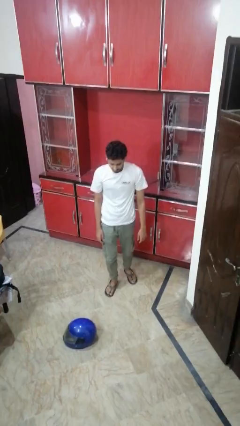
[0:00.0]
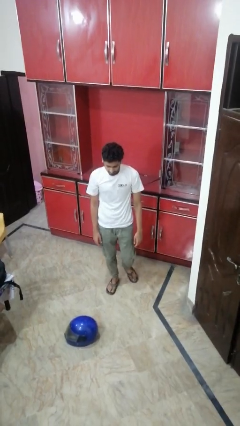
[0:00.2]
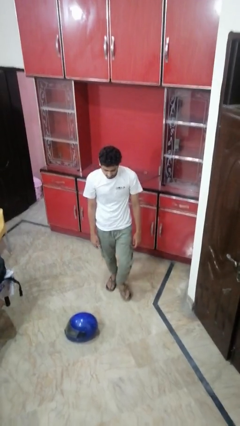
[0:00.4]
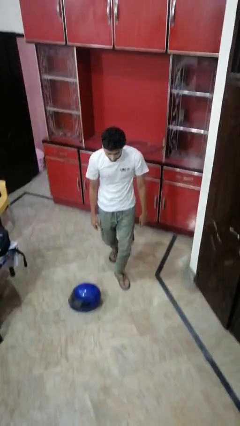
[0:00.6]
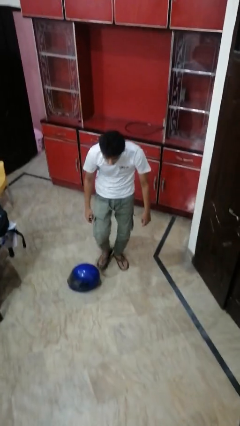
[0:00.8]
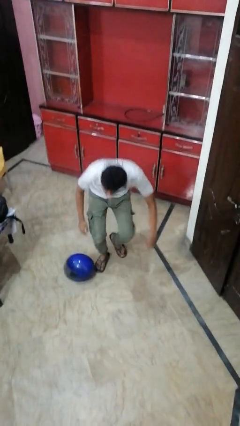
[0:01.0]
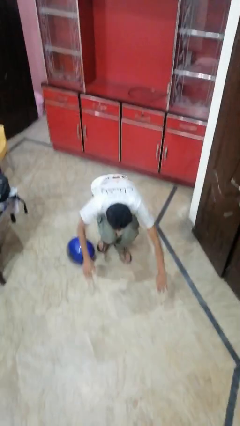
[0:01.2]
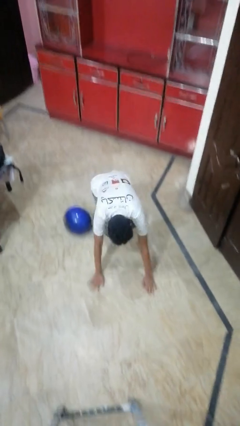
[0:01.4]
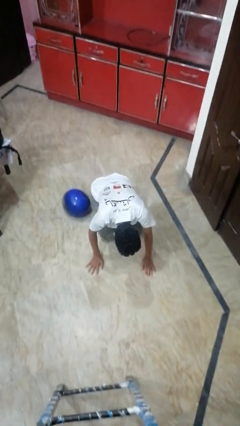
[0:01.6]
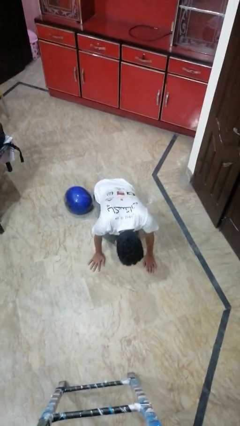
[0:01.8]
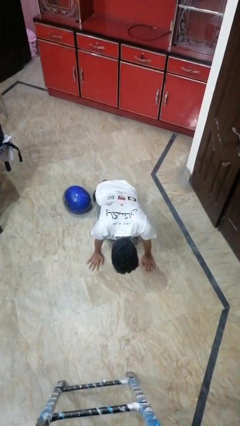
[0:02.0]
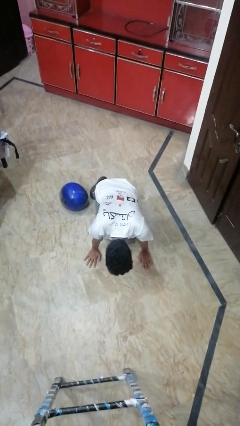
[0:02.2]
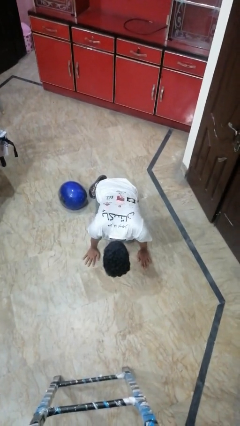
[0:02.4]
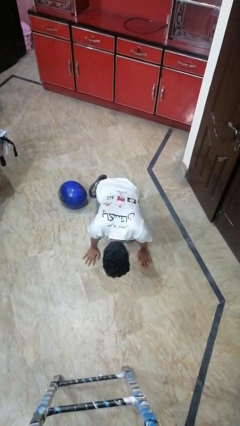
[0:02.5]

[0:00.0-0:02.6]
person trips on object on floor

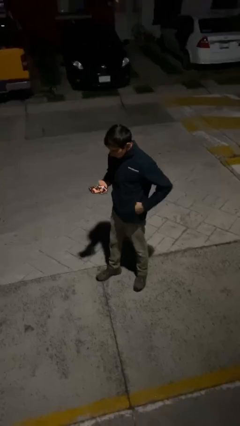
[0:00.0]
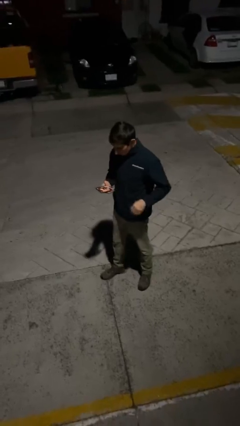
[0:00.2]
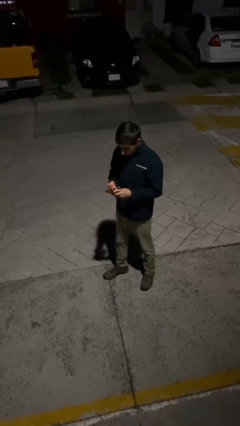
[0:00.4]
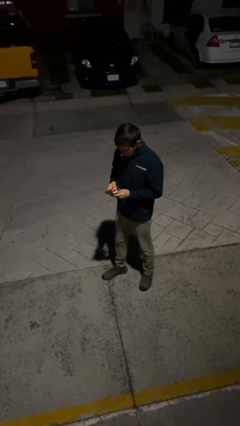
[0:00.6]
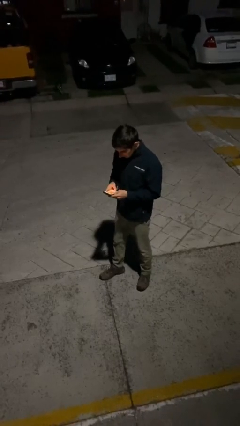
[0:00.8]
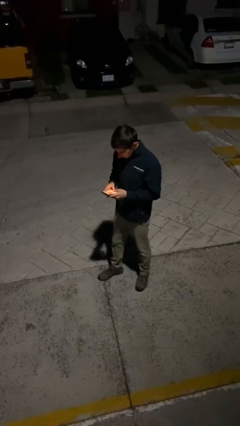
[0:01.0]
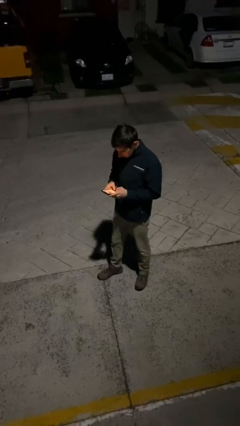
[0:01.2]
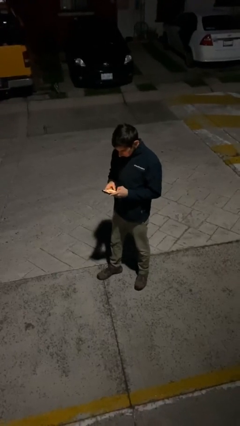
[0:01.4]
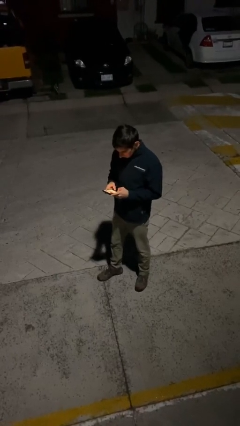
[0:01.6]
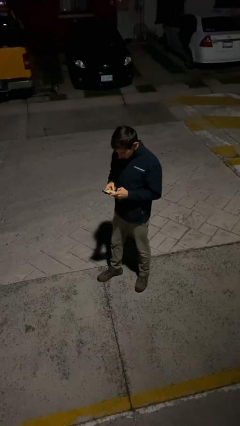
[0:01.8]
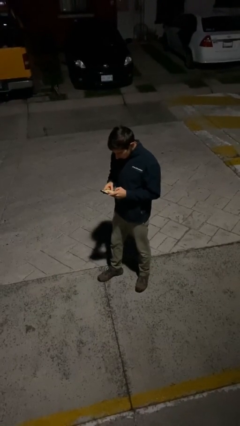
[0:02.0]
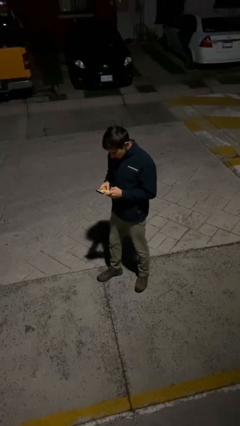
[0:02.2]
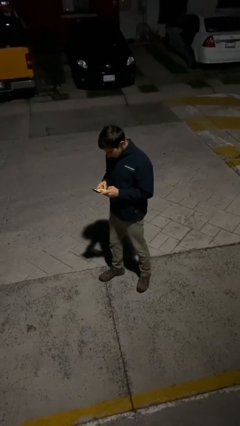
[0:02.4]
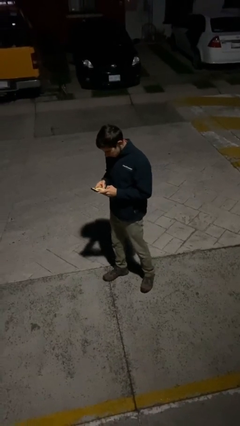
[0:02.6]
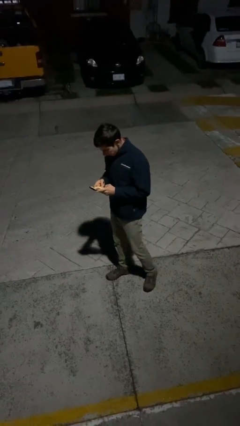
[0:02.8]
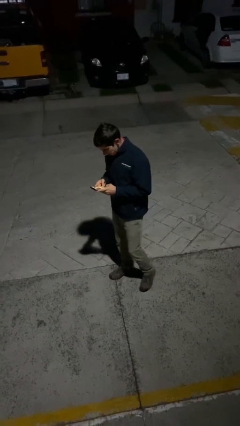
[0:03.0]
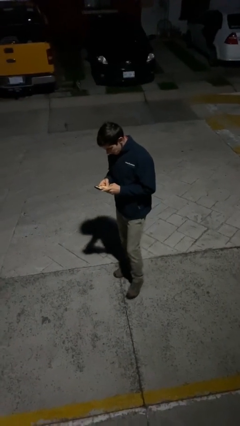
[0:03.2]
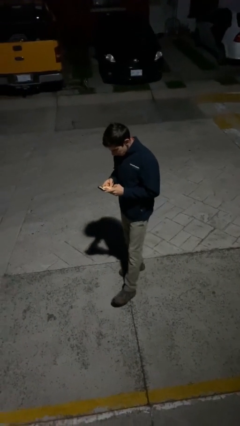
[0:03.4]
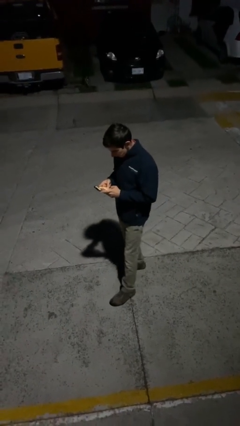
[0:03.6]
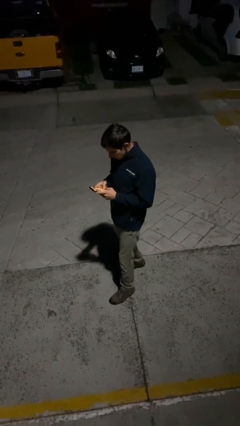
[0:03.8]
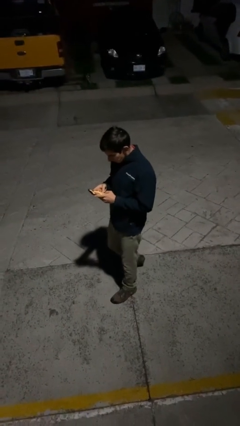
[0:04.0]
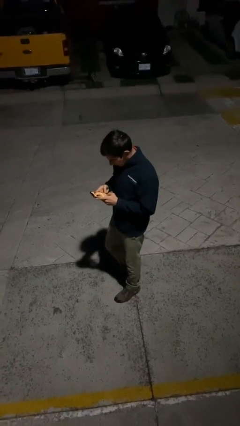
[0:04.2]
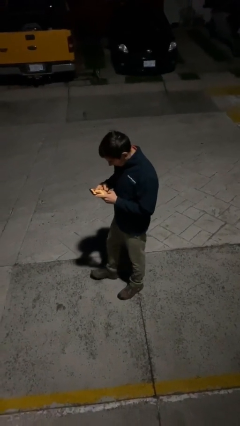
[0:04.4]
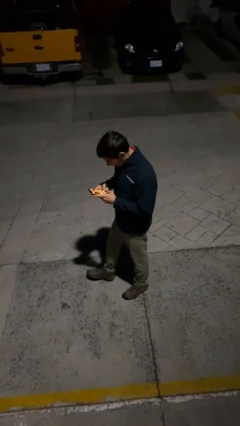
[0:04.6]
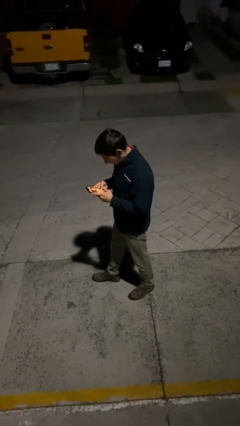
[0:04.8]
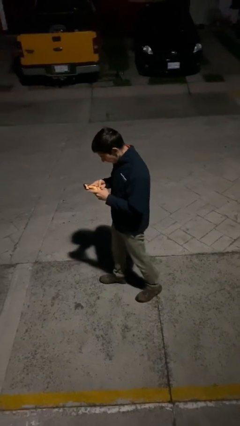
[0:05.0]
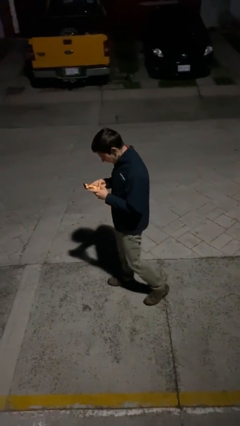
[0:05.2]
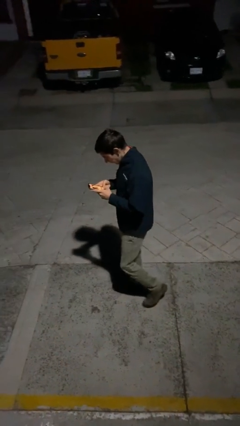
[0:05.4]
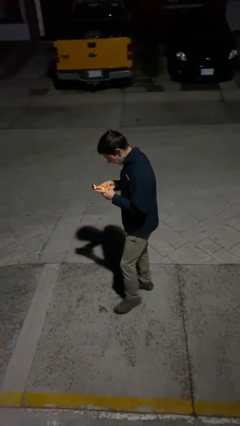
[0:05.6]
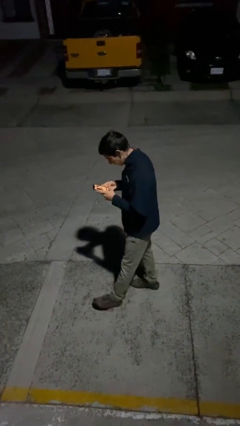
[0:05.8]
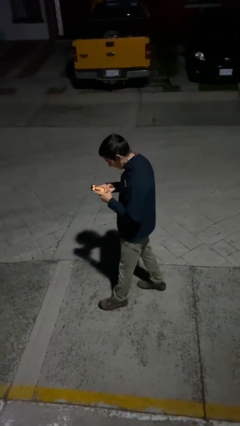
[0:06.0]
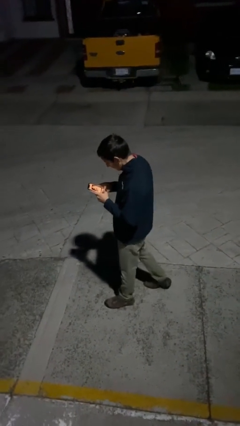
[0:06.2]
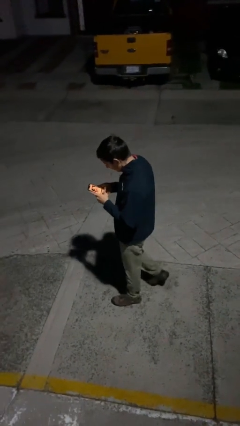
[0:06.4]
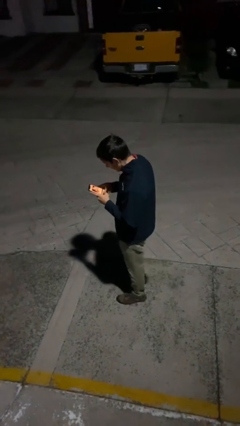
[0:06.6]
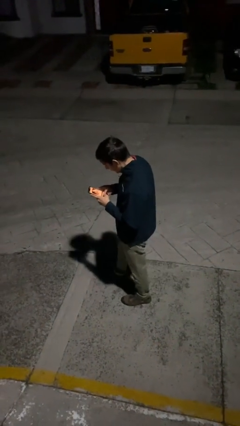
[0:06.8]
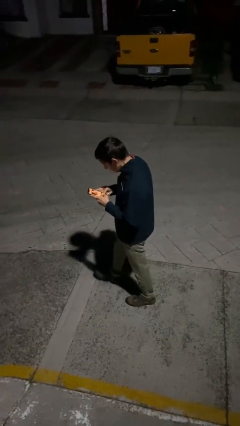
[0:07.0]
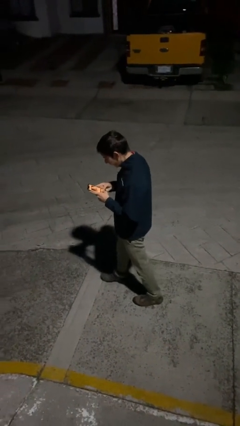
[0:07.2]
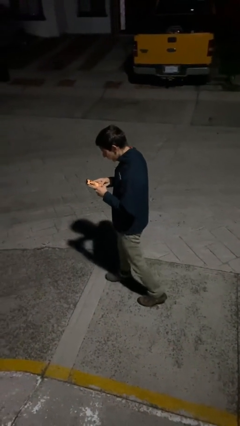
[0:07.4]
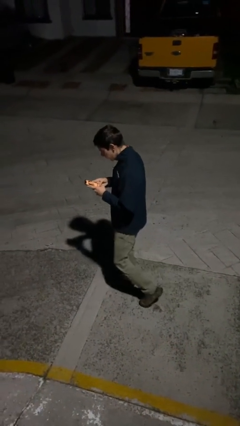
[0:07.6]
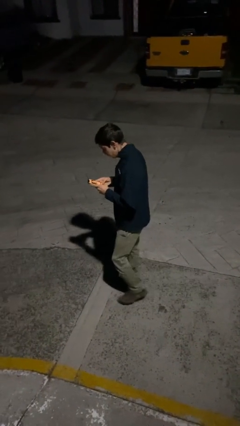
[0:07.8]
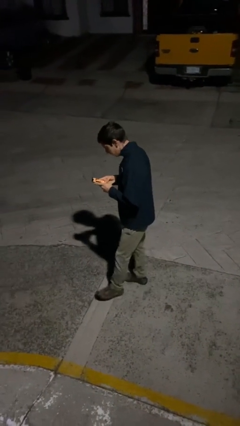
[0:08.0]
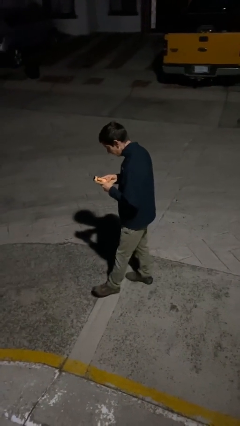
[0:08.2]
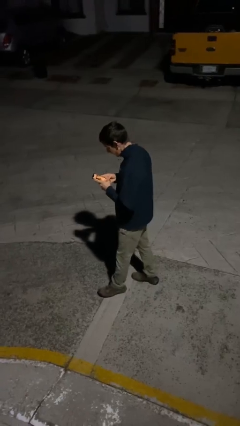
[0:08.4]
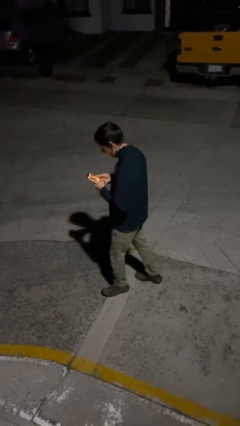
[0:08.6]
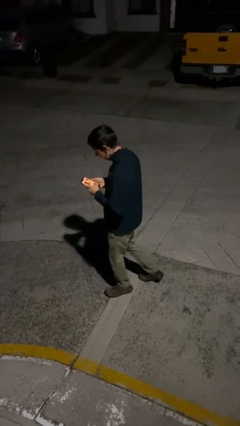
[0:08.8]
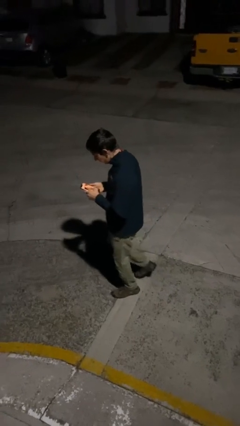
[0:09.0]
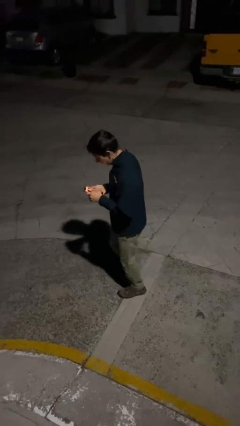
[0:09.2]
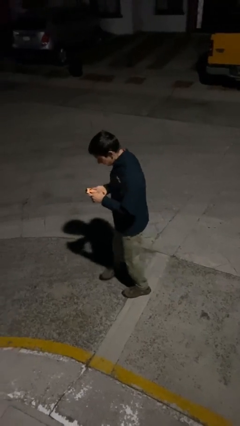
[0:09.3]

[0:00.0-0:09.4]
person texts on phone

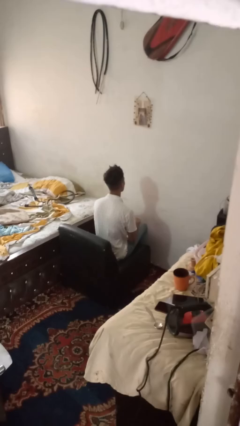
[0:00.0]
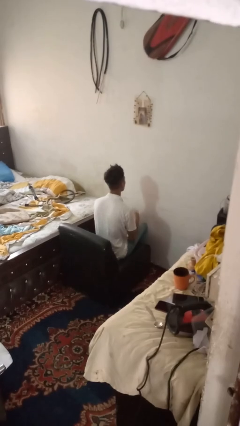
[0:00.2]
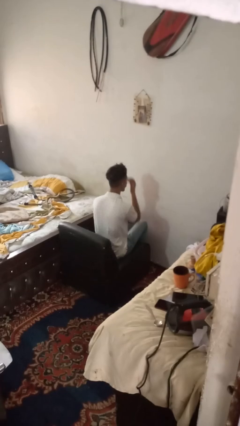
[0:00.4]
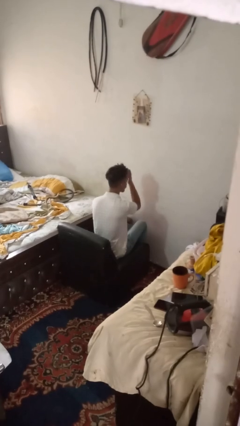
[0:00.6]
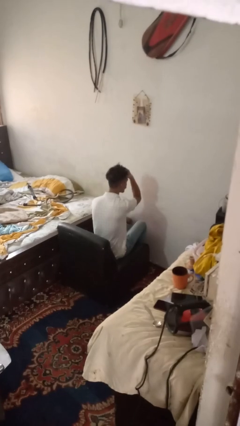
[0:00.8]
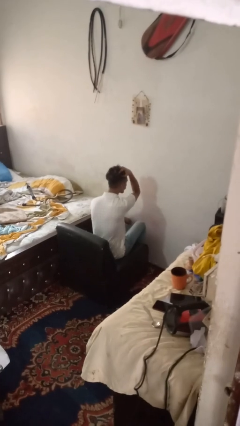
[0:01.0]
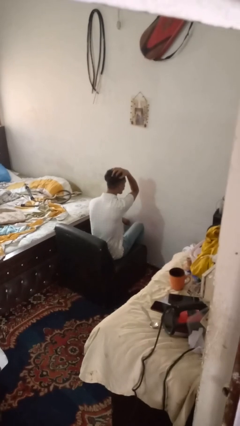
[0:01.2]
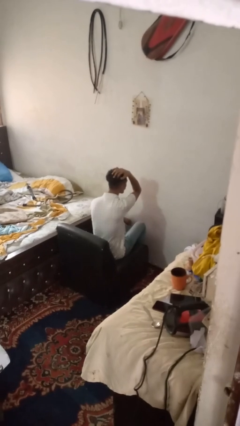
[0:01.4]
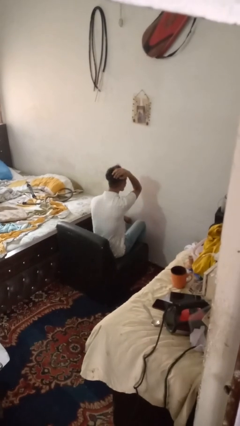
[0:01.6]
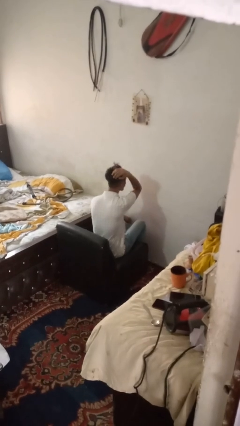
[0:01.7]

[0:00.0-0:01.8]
person strokes hair

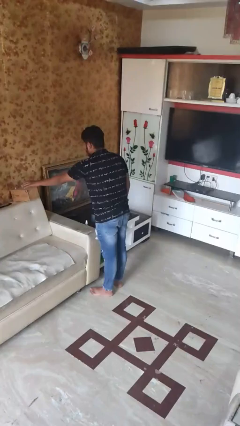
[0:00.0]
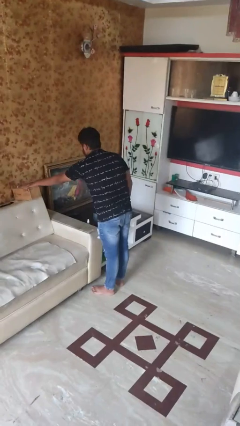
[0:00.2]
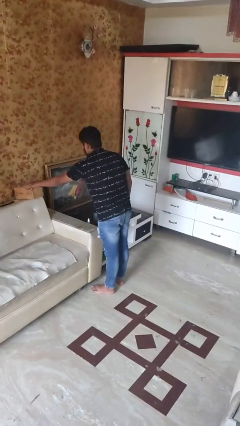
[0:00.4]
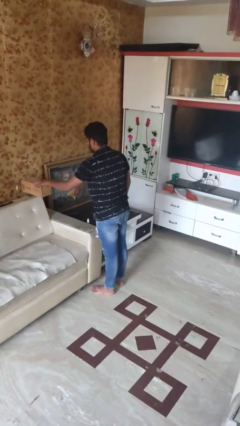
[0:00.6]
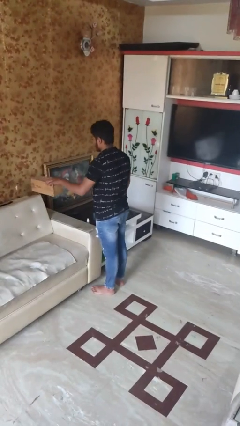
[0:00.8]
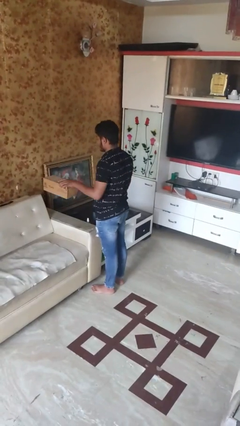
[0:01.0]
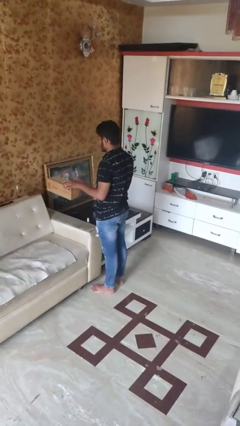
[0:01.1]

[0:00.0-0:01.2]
person picks up object from couch

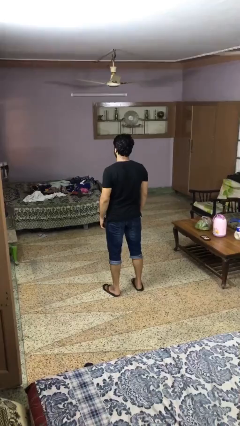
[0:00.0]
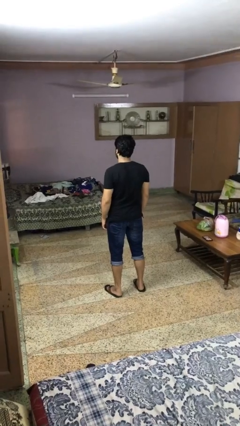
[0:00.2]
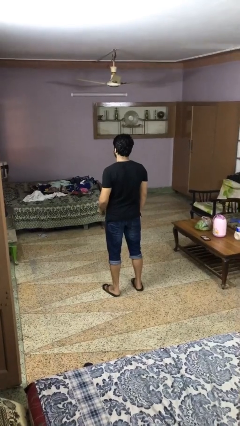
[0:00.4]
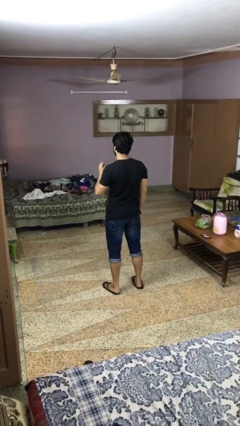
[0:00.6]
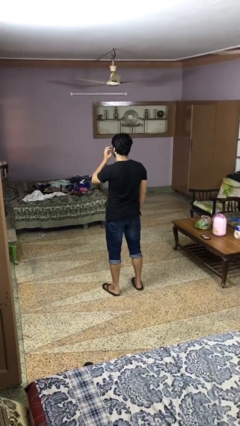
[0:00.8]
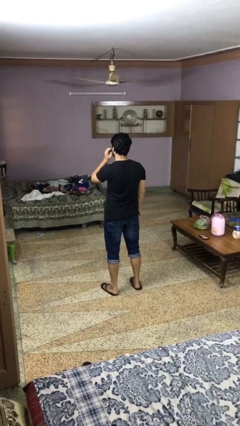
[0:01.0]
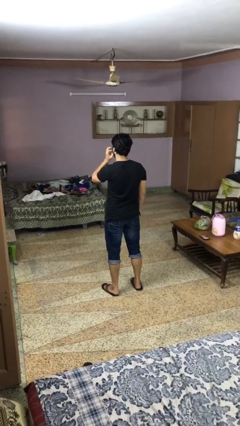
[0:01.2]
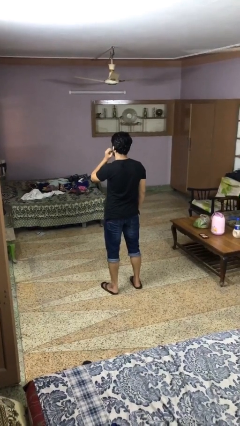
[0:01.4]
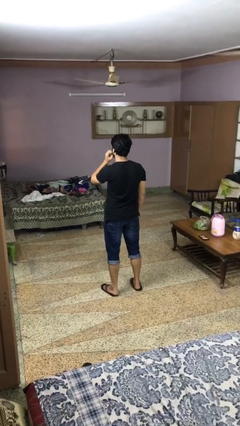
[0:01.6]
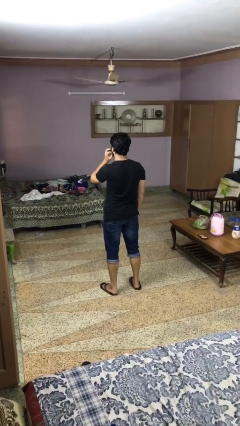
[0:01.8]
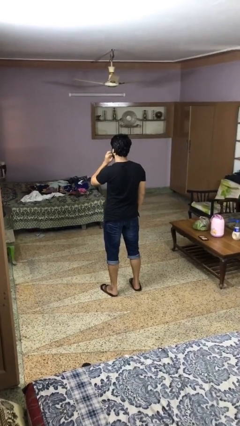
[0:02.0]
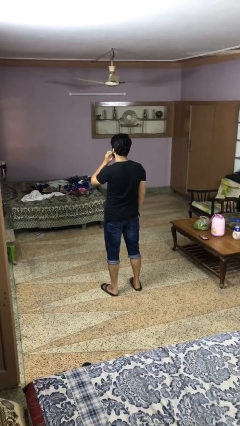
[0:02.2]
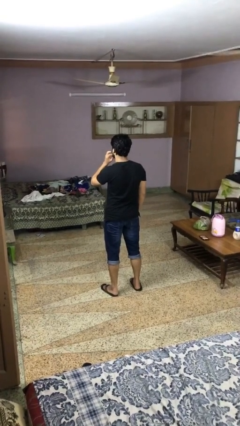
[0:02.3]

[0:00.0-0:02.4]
person scratches face
